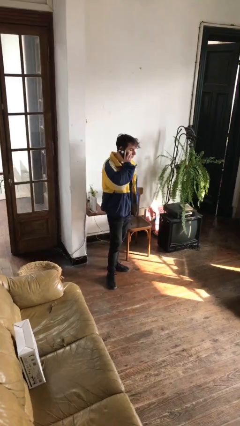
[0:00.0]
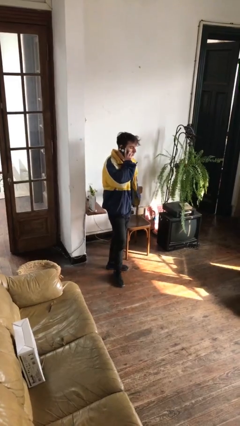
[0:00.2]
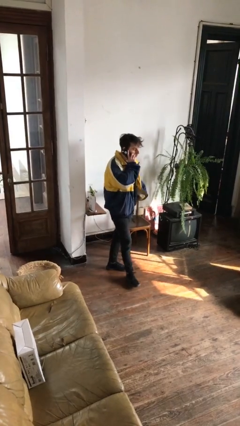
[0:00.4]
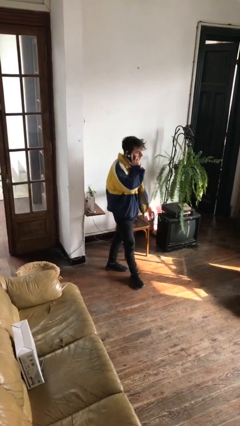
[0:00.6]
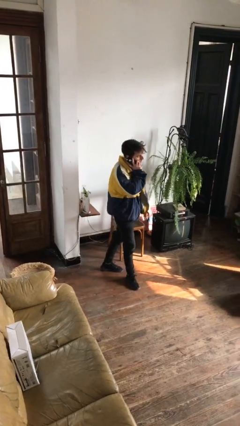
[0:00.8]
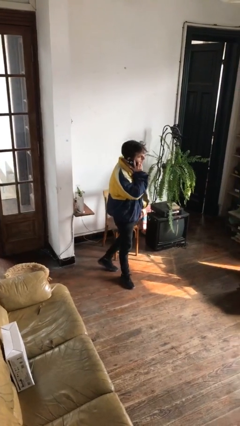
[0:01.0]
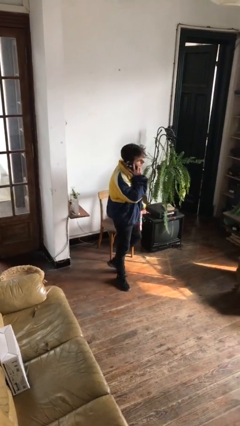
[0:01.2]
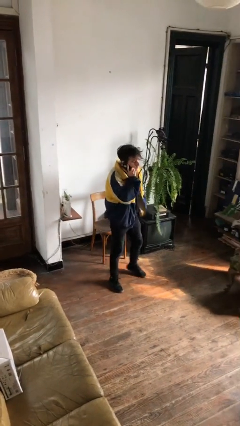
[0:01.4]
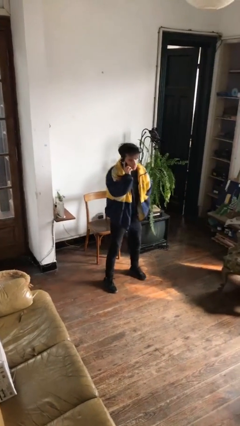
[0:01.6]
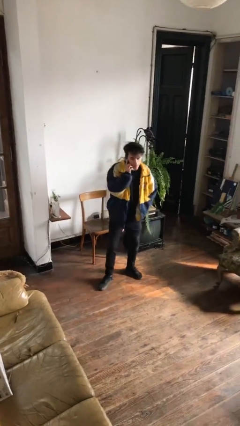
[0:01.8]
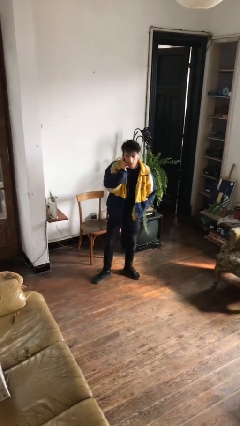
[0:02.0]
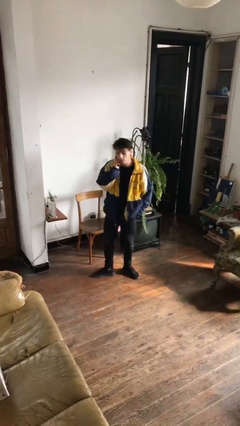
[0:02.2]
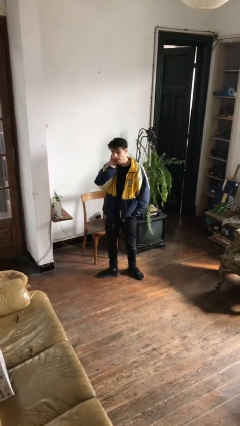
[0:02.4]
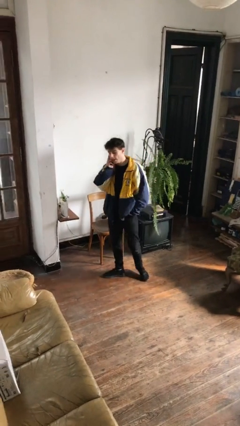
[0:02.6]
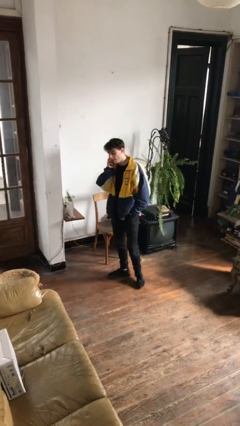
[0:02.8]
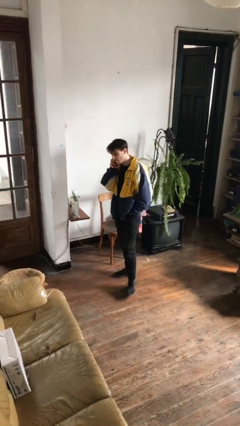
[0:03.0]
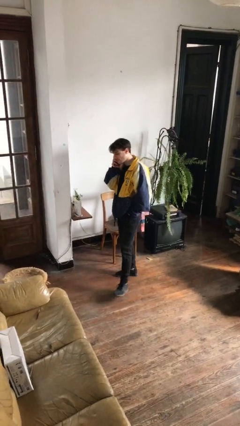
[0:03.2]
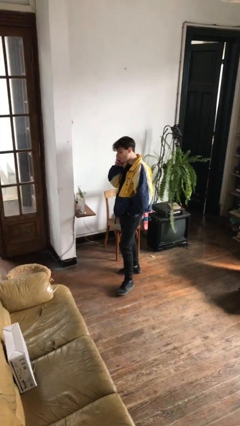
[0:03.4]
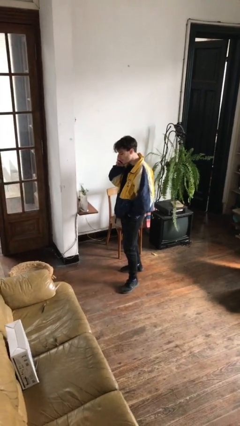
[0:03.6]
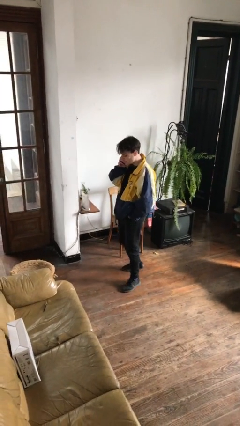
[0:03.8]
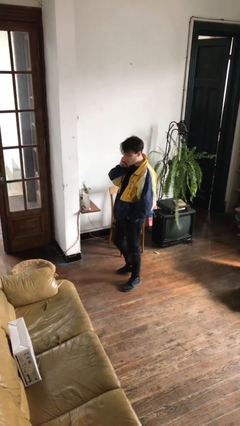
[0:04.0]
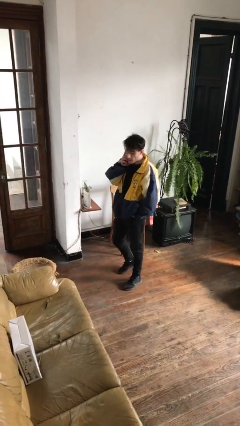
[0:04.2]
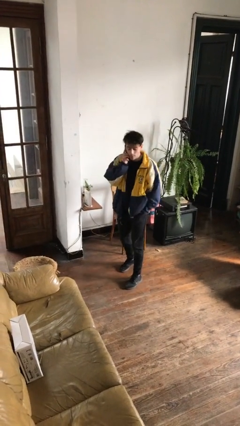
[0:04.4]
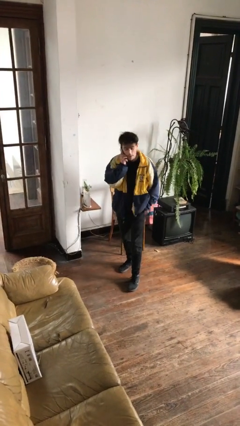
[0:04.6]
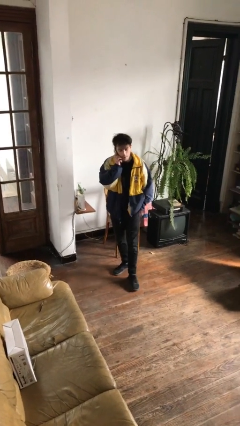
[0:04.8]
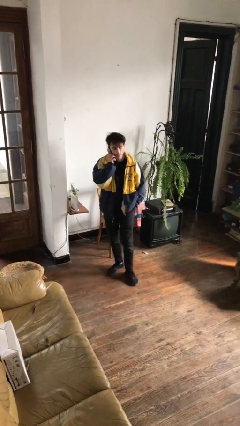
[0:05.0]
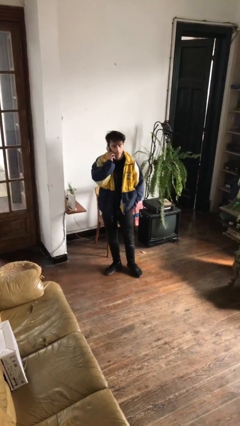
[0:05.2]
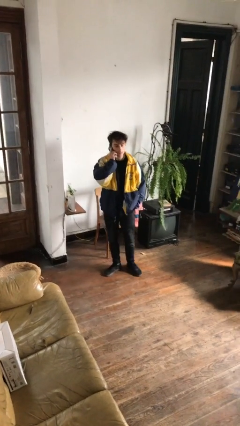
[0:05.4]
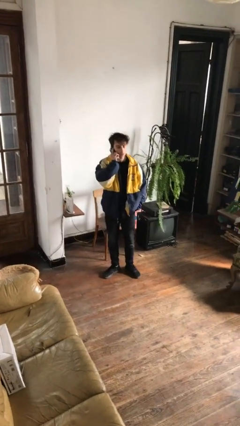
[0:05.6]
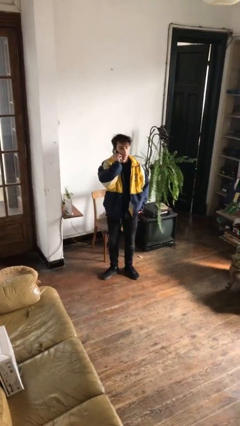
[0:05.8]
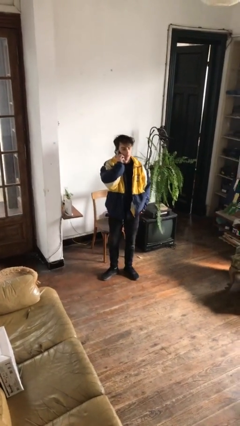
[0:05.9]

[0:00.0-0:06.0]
person talks on phone

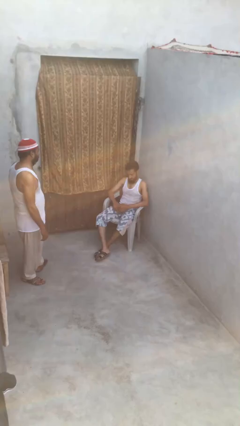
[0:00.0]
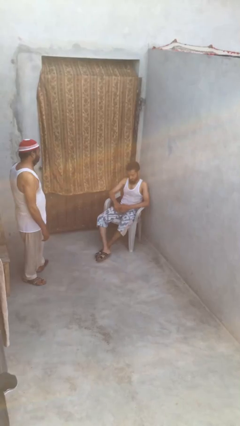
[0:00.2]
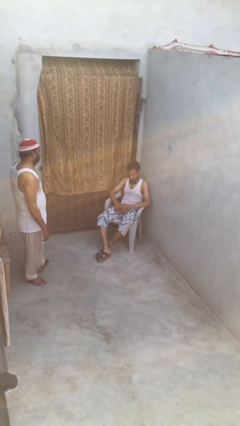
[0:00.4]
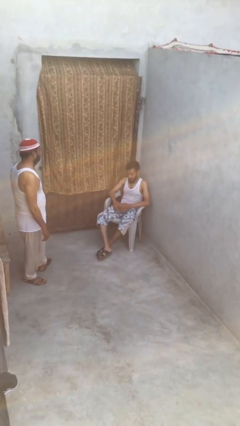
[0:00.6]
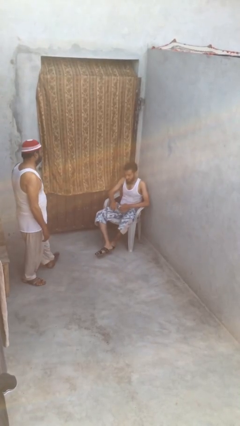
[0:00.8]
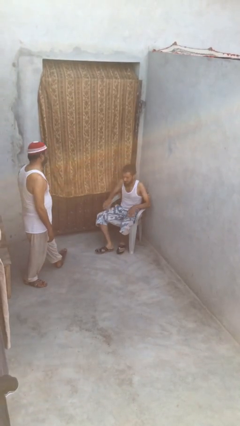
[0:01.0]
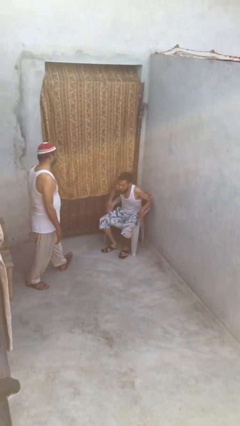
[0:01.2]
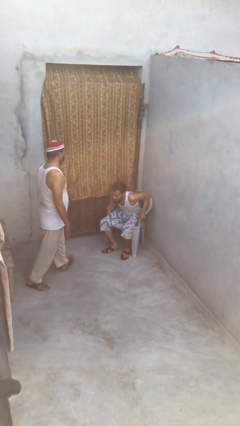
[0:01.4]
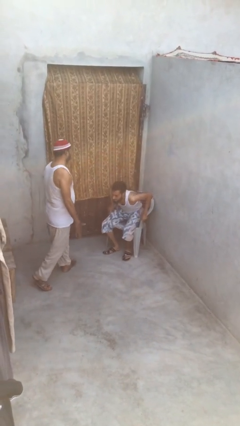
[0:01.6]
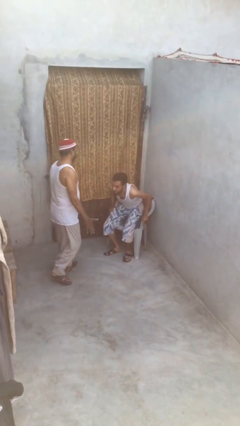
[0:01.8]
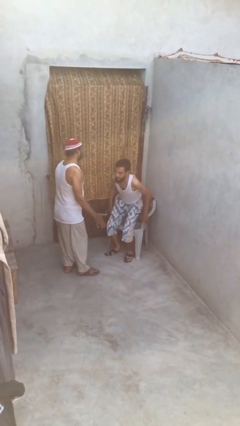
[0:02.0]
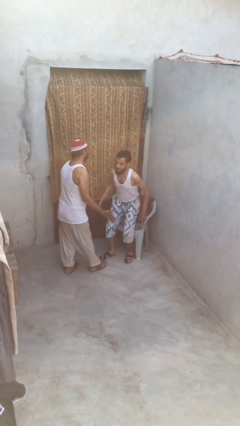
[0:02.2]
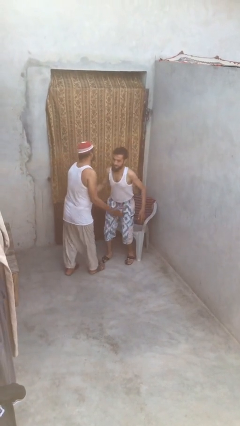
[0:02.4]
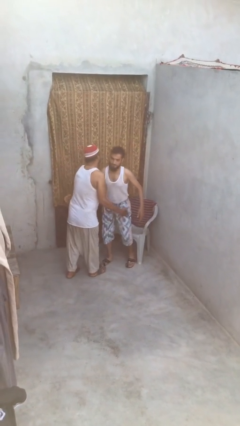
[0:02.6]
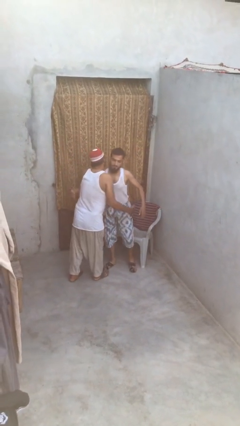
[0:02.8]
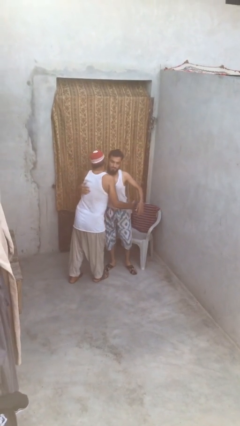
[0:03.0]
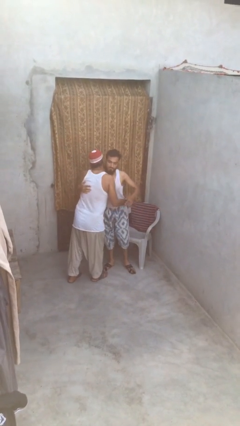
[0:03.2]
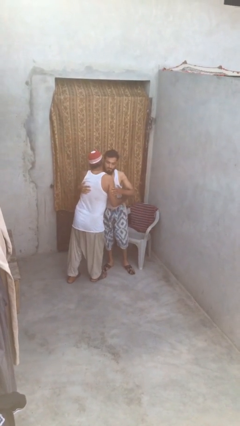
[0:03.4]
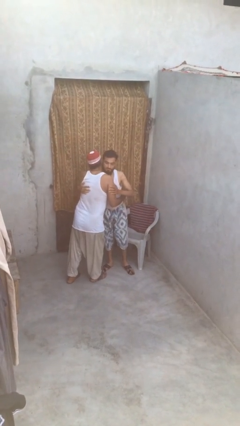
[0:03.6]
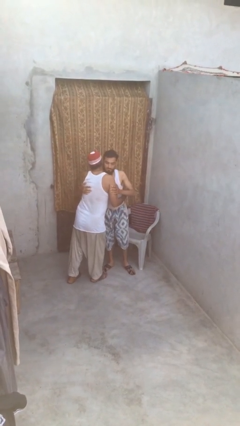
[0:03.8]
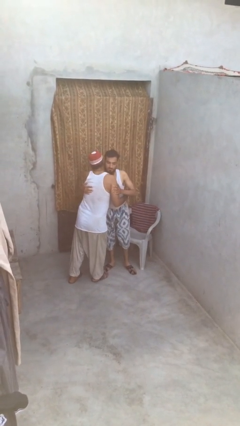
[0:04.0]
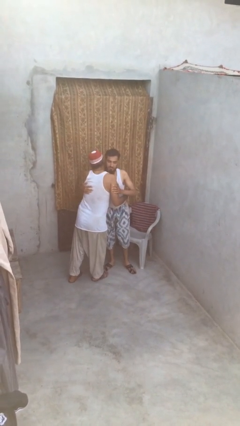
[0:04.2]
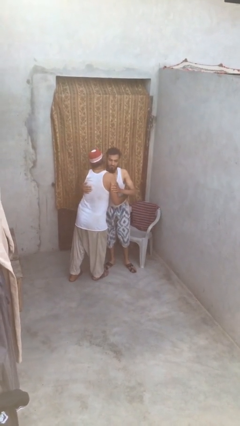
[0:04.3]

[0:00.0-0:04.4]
person embraces person

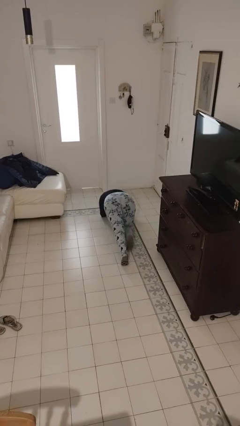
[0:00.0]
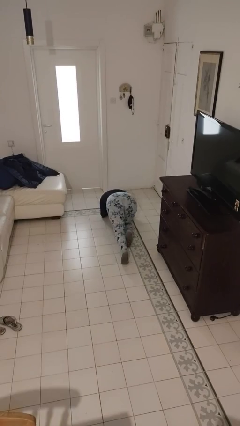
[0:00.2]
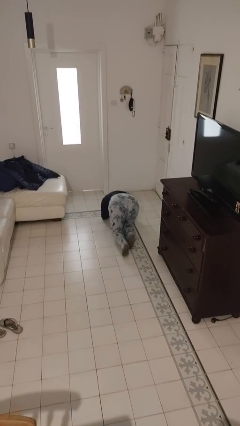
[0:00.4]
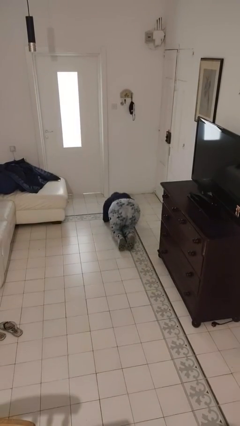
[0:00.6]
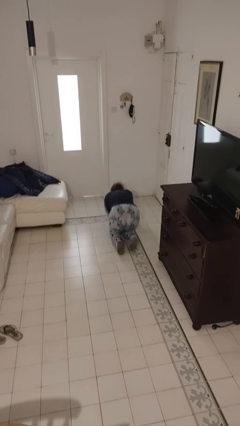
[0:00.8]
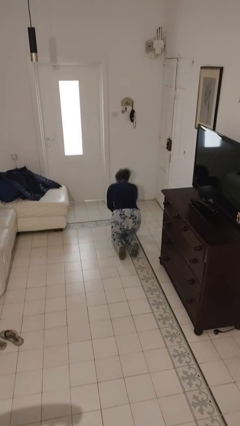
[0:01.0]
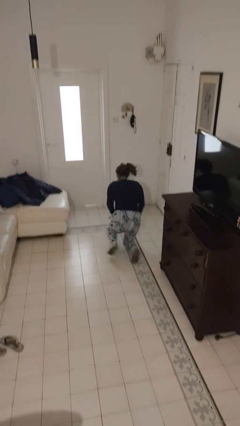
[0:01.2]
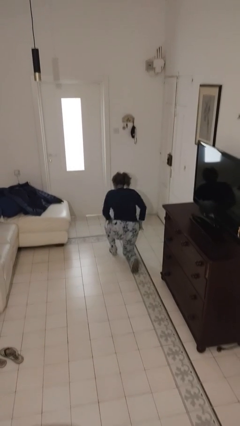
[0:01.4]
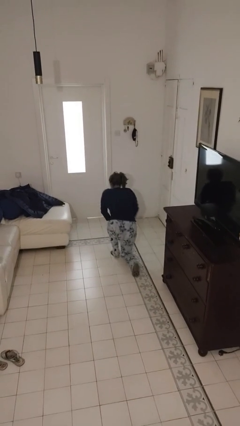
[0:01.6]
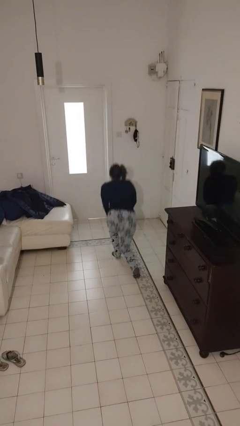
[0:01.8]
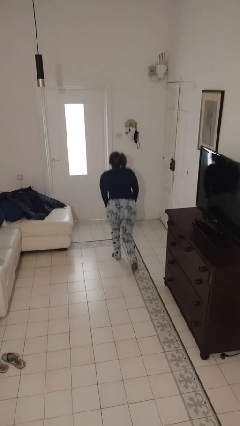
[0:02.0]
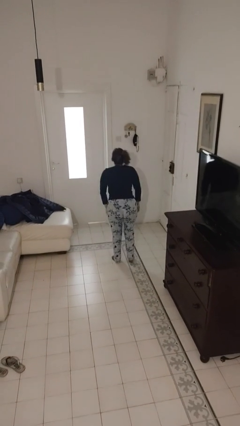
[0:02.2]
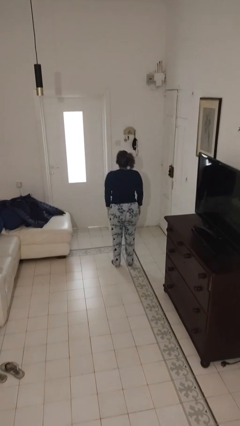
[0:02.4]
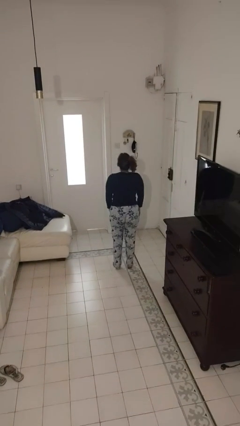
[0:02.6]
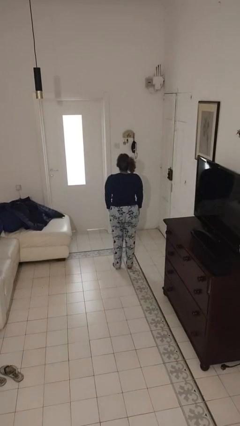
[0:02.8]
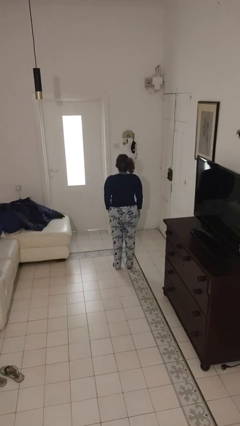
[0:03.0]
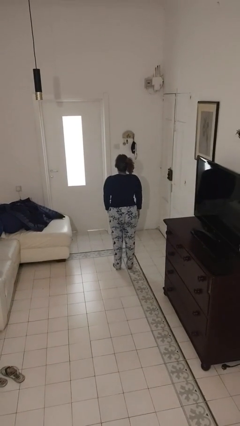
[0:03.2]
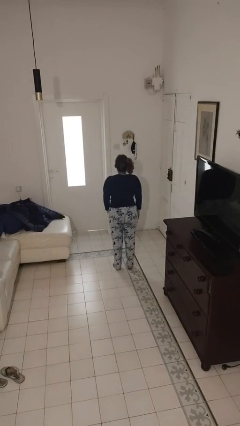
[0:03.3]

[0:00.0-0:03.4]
person stands up from floor

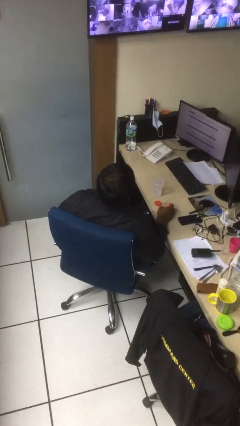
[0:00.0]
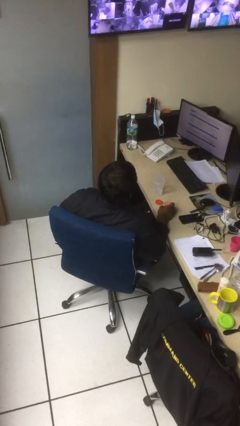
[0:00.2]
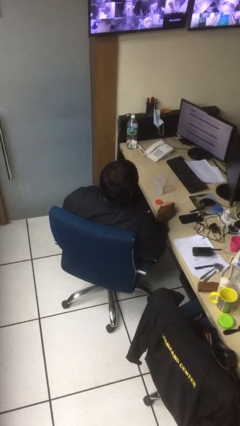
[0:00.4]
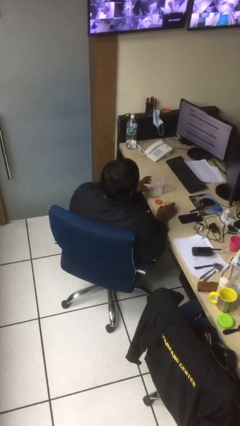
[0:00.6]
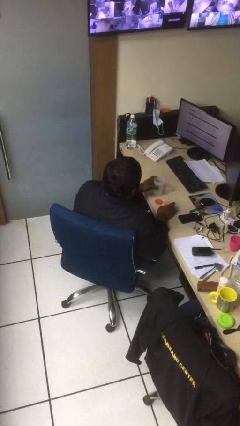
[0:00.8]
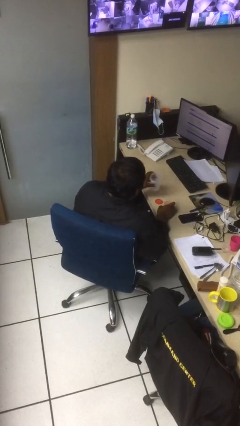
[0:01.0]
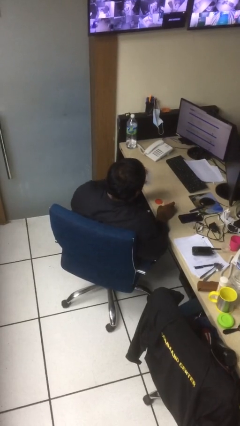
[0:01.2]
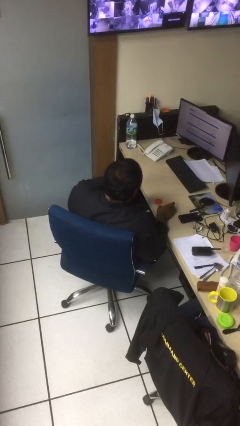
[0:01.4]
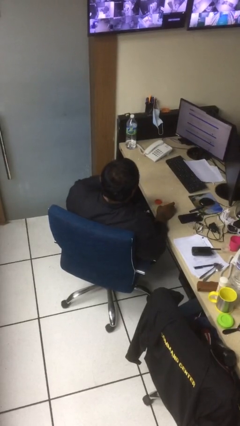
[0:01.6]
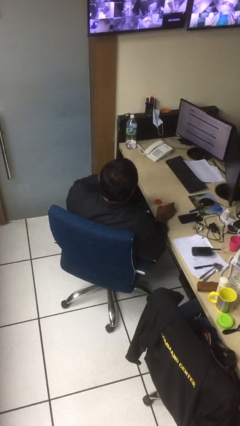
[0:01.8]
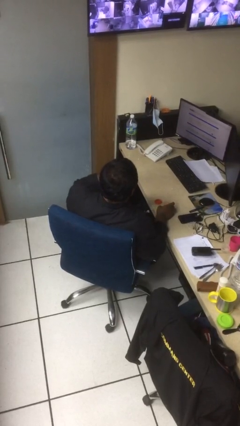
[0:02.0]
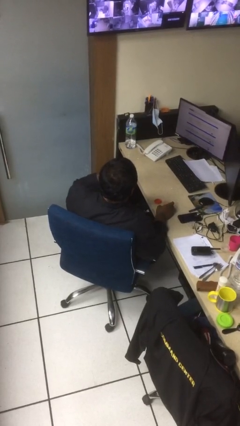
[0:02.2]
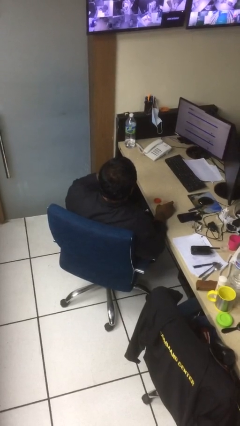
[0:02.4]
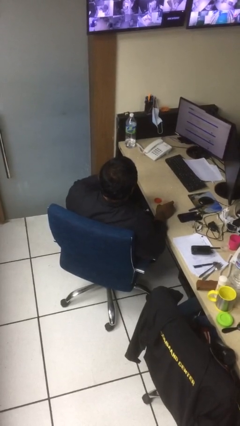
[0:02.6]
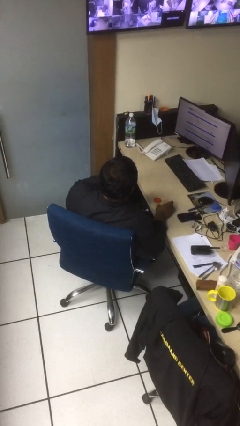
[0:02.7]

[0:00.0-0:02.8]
person drinks from cup

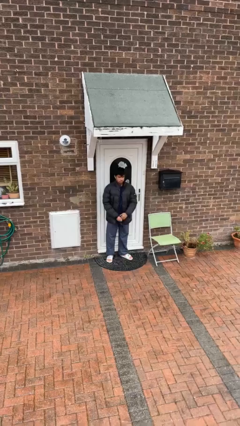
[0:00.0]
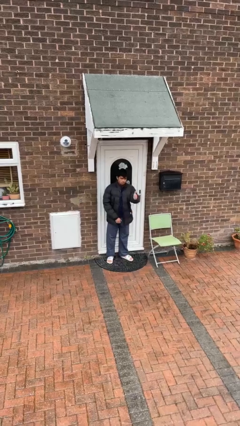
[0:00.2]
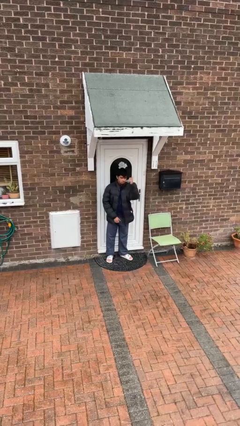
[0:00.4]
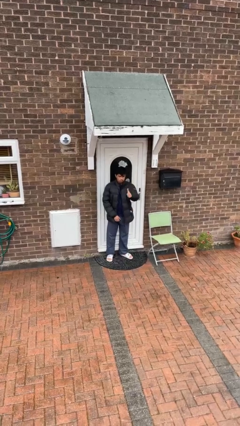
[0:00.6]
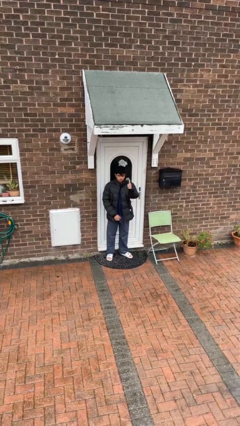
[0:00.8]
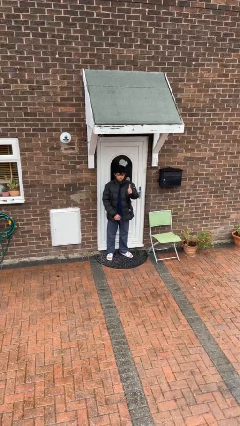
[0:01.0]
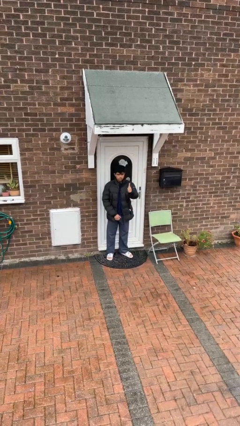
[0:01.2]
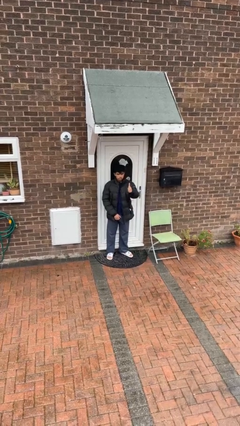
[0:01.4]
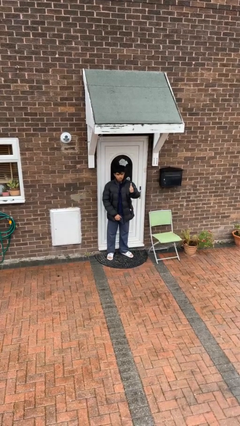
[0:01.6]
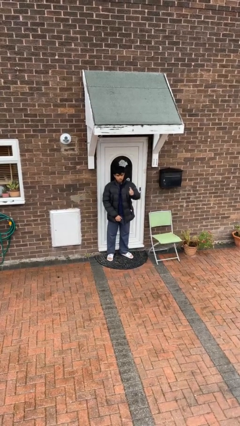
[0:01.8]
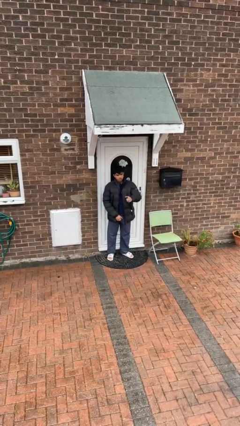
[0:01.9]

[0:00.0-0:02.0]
person gestures thumbs up
